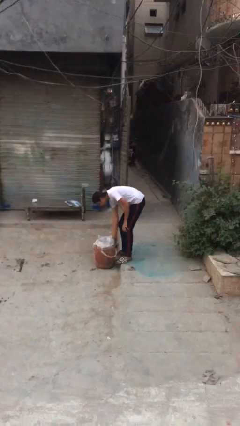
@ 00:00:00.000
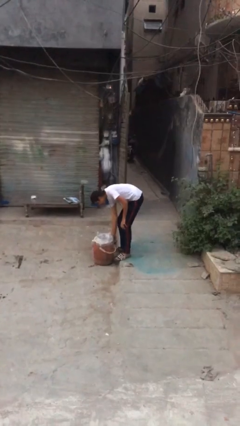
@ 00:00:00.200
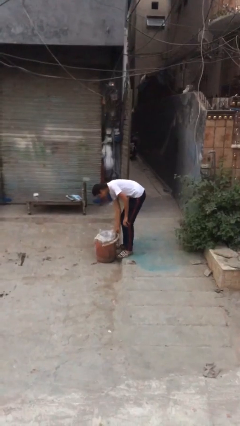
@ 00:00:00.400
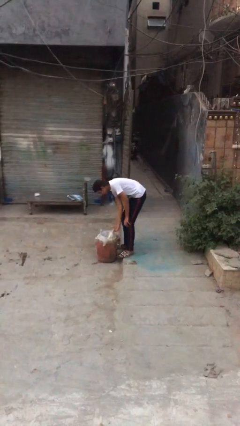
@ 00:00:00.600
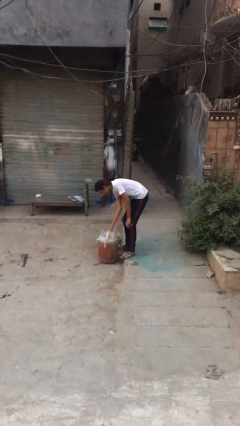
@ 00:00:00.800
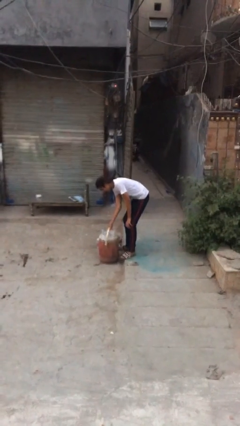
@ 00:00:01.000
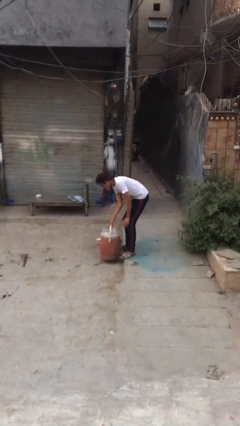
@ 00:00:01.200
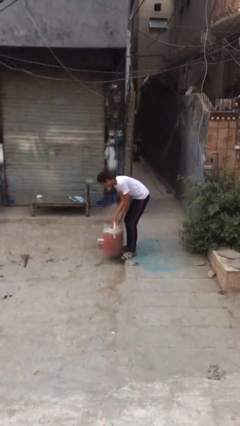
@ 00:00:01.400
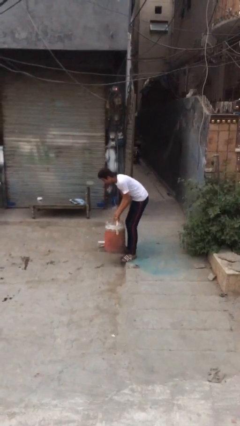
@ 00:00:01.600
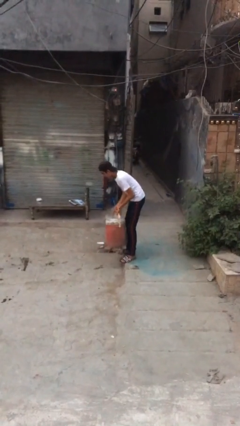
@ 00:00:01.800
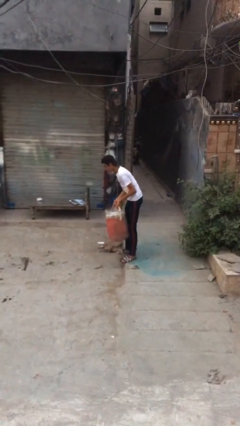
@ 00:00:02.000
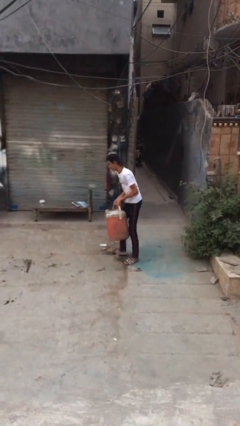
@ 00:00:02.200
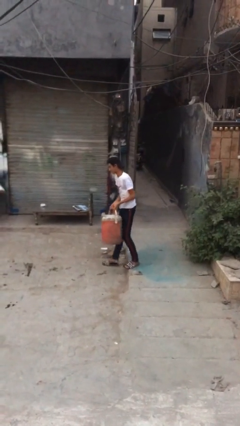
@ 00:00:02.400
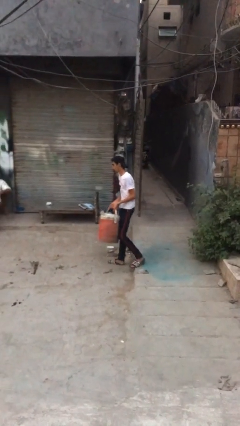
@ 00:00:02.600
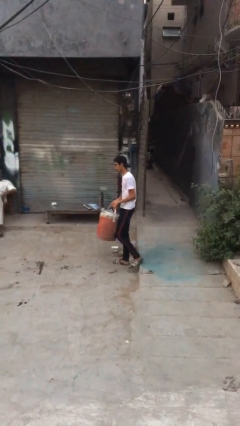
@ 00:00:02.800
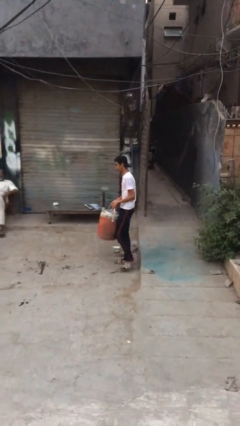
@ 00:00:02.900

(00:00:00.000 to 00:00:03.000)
person picks up object from floor

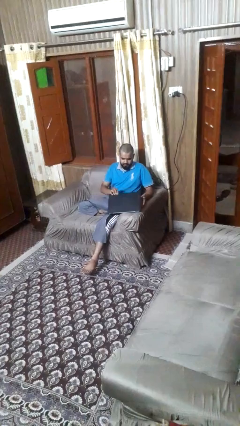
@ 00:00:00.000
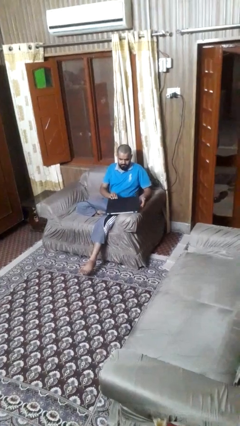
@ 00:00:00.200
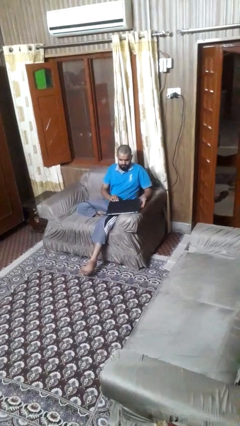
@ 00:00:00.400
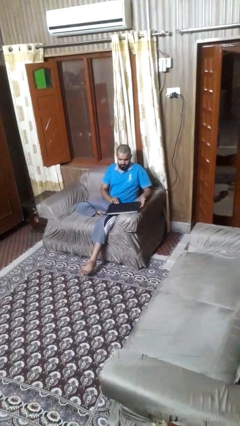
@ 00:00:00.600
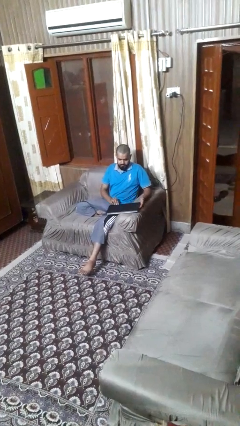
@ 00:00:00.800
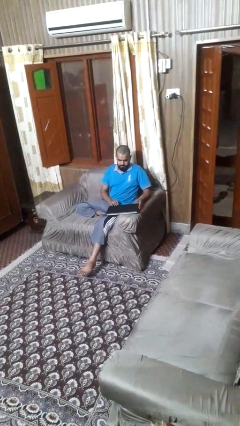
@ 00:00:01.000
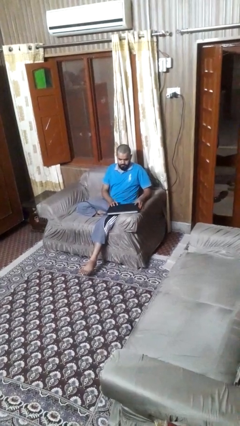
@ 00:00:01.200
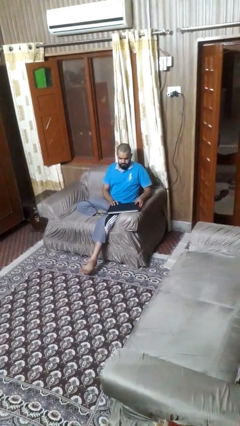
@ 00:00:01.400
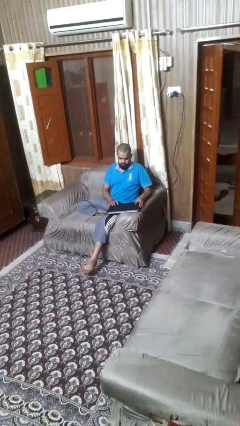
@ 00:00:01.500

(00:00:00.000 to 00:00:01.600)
person closes laptop

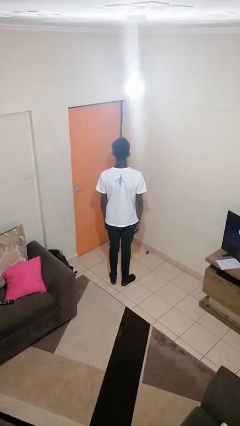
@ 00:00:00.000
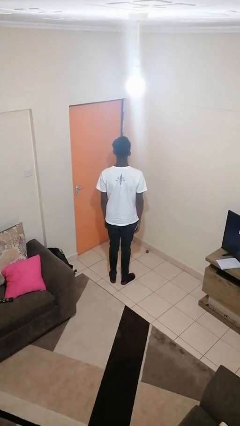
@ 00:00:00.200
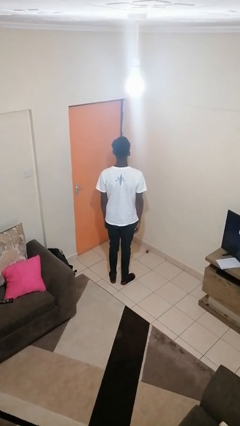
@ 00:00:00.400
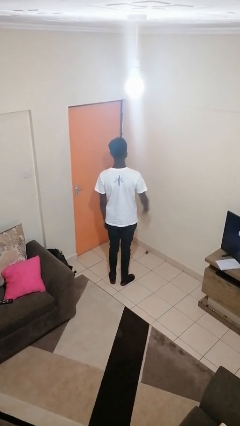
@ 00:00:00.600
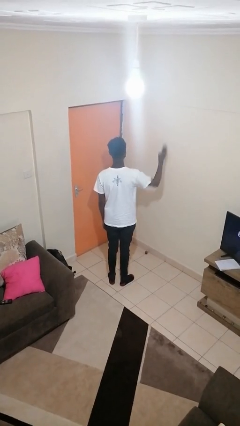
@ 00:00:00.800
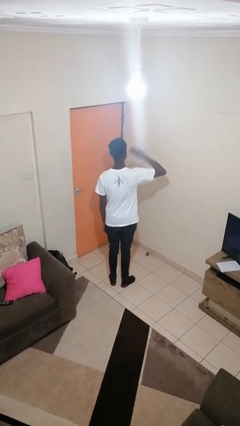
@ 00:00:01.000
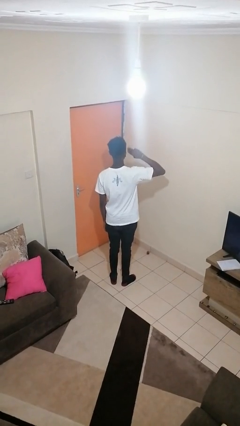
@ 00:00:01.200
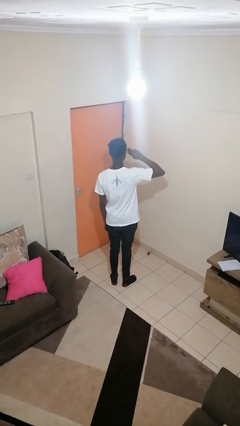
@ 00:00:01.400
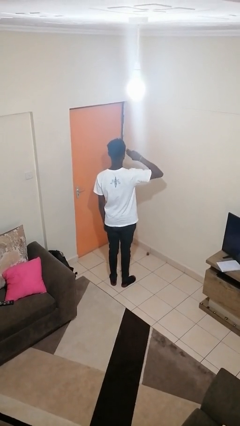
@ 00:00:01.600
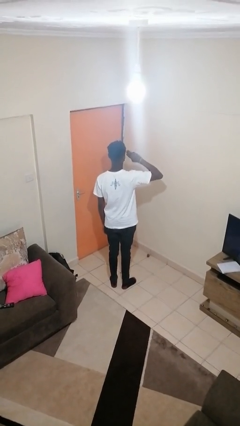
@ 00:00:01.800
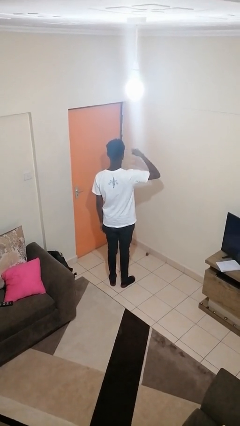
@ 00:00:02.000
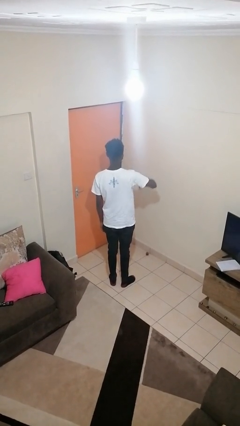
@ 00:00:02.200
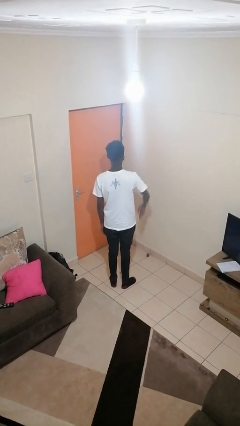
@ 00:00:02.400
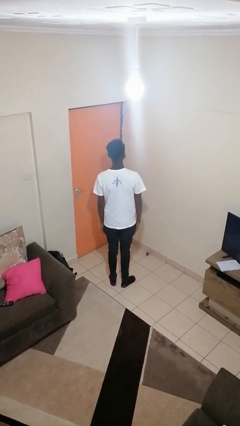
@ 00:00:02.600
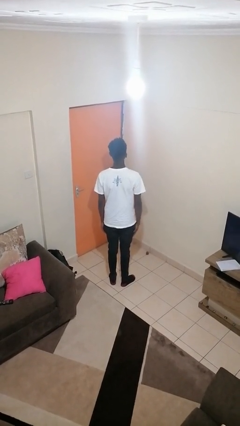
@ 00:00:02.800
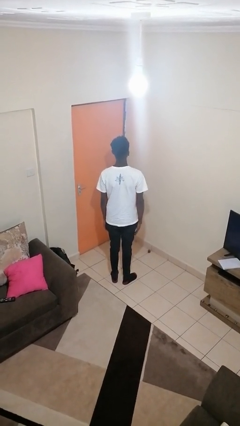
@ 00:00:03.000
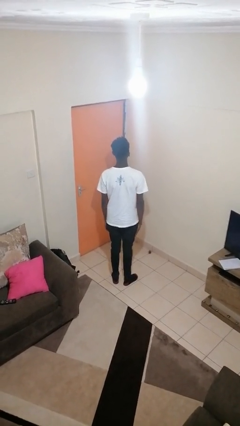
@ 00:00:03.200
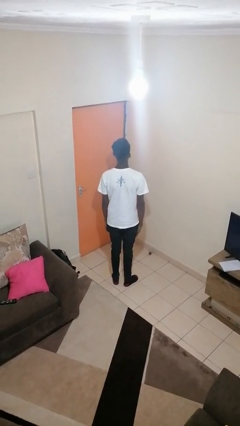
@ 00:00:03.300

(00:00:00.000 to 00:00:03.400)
person salutes

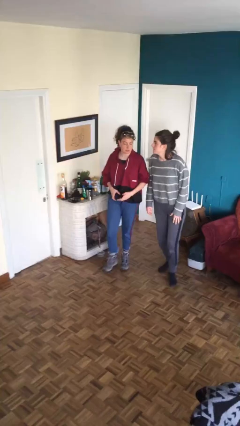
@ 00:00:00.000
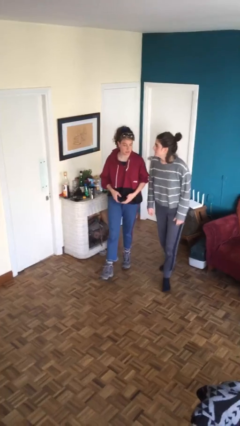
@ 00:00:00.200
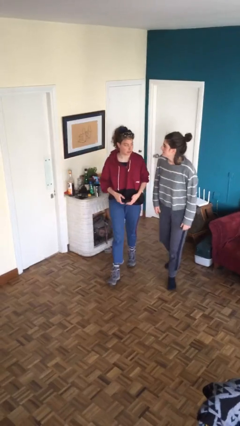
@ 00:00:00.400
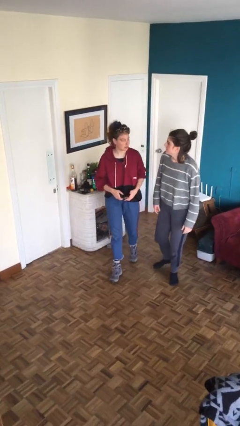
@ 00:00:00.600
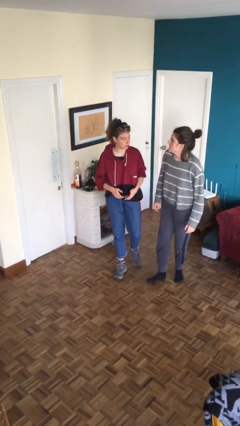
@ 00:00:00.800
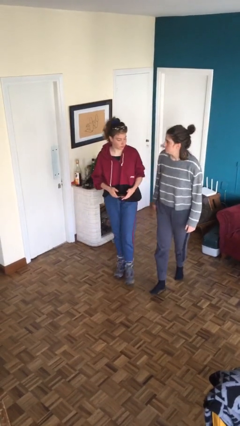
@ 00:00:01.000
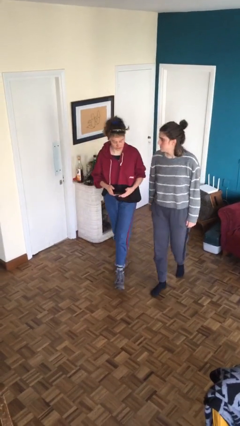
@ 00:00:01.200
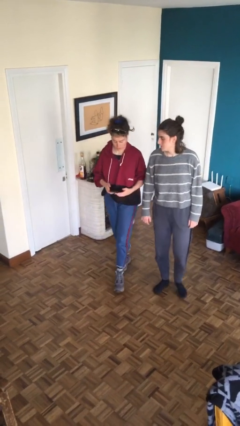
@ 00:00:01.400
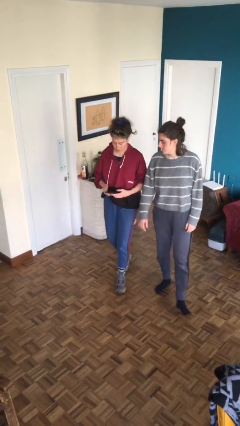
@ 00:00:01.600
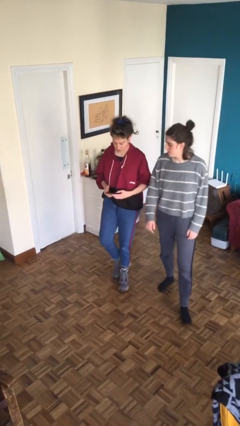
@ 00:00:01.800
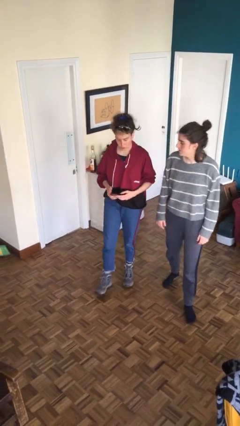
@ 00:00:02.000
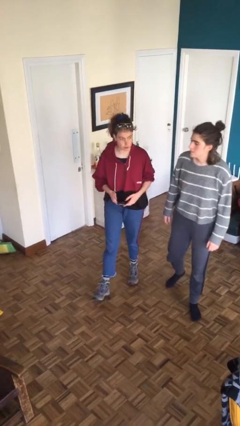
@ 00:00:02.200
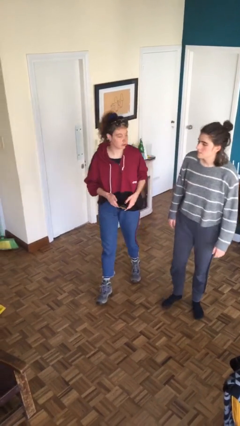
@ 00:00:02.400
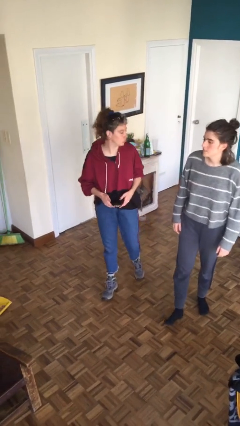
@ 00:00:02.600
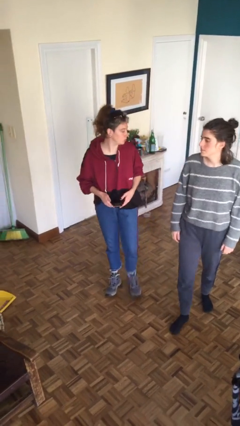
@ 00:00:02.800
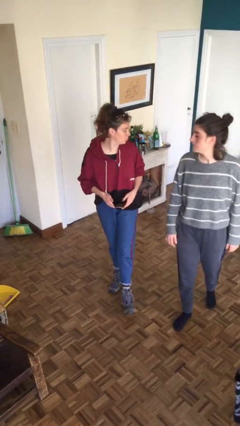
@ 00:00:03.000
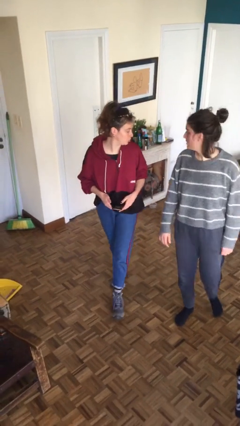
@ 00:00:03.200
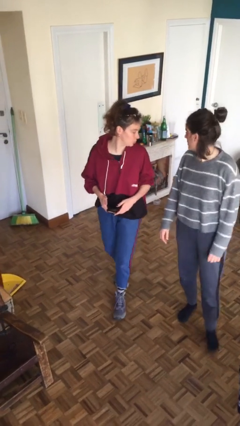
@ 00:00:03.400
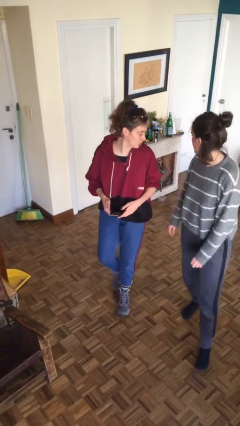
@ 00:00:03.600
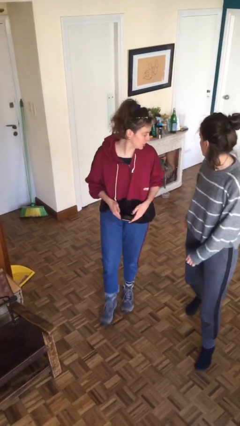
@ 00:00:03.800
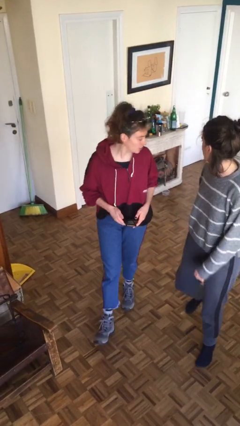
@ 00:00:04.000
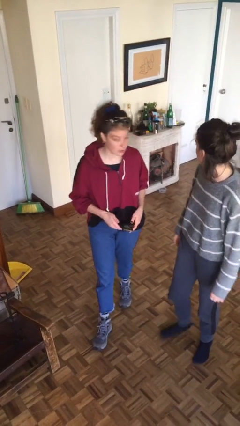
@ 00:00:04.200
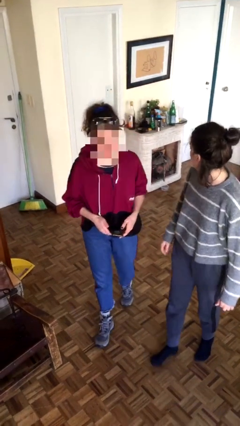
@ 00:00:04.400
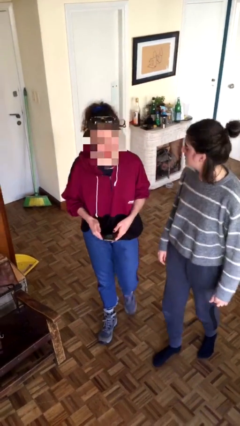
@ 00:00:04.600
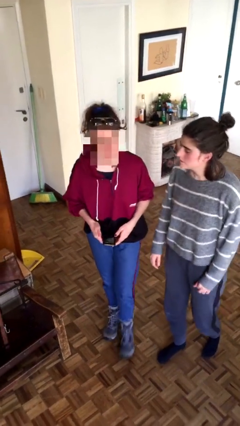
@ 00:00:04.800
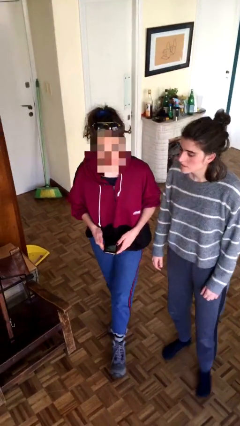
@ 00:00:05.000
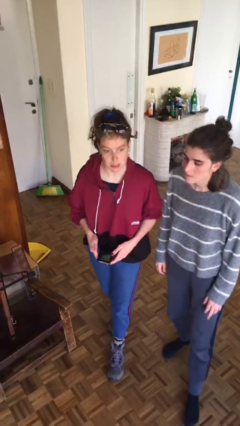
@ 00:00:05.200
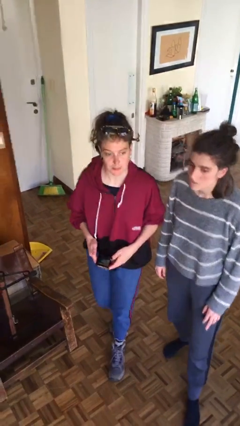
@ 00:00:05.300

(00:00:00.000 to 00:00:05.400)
person talks to person

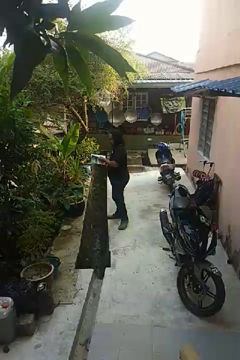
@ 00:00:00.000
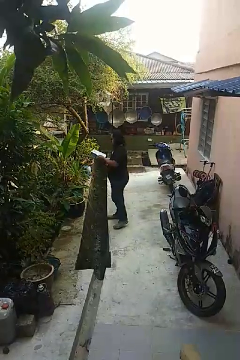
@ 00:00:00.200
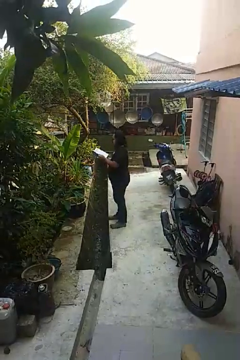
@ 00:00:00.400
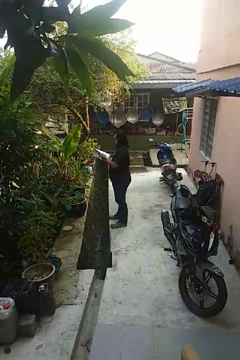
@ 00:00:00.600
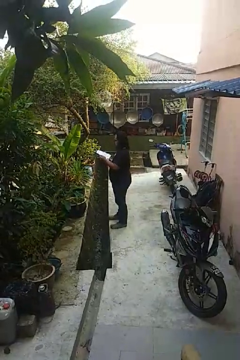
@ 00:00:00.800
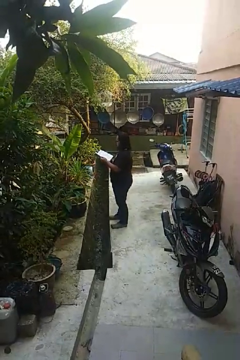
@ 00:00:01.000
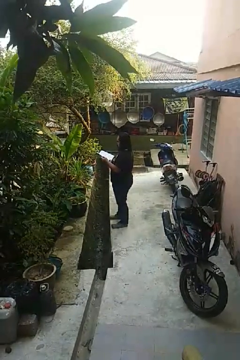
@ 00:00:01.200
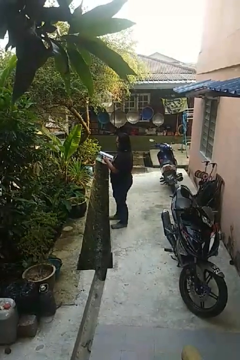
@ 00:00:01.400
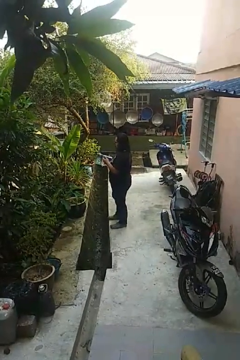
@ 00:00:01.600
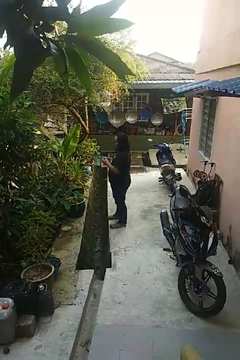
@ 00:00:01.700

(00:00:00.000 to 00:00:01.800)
person reads magazine

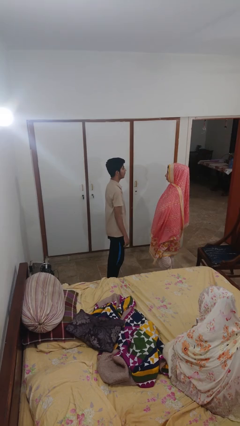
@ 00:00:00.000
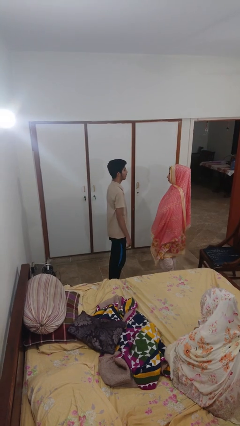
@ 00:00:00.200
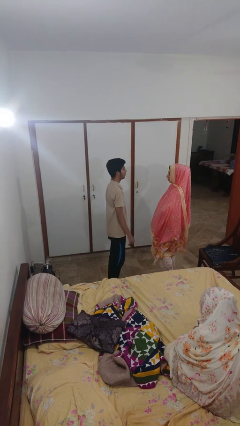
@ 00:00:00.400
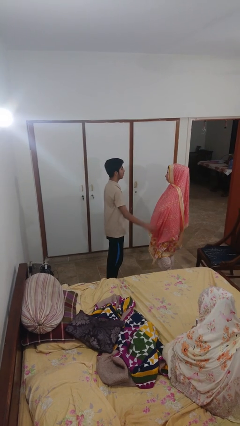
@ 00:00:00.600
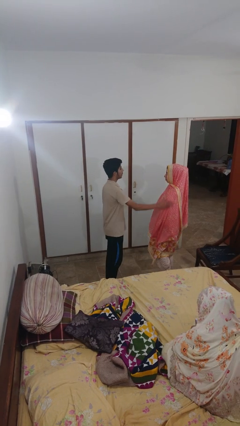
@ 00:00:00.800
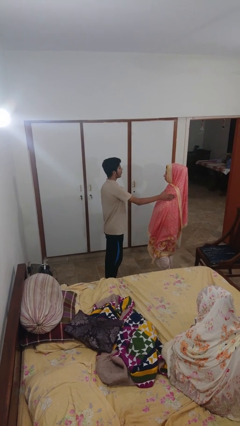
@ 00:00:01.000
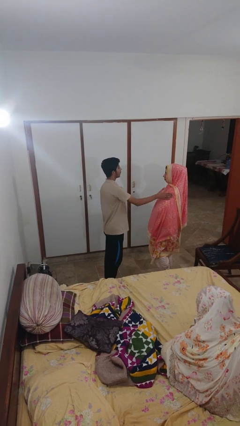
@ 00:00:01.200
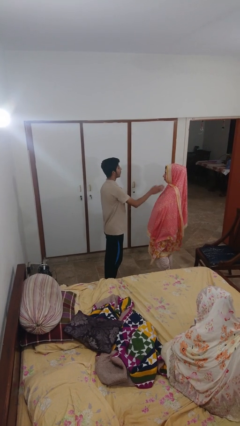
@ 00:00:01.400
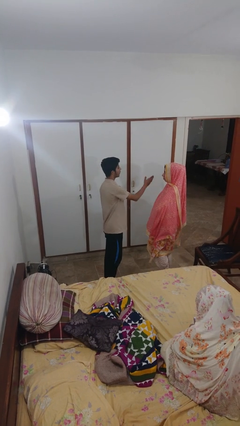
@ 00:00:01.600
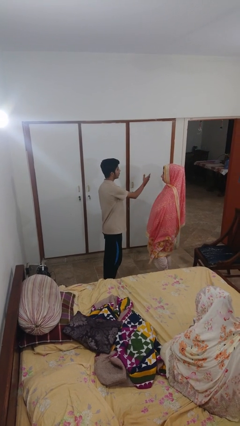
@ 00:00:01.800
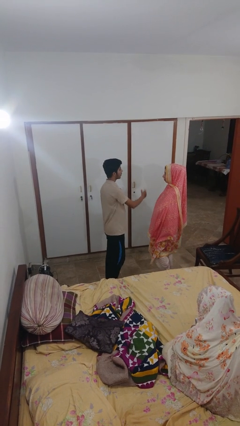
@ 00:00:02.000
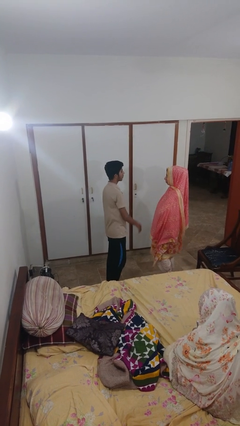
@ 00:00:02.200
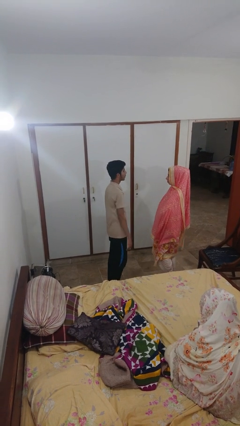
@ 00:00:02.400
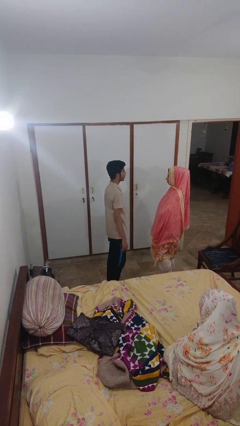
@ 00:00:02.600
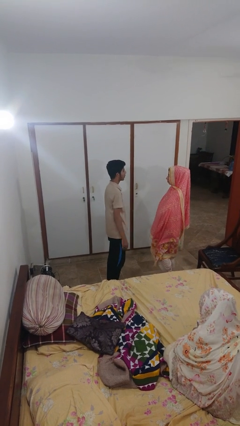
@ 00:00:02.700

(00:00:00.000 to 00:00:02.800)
person shoves person
